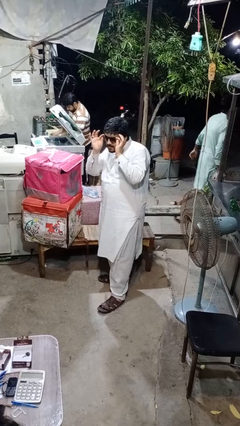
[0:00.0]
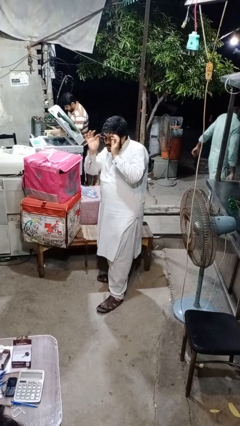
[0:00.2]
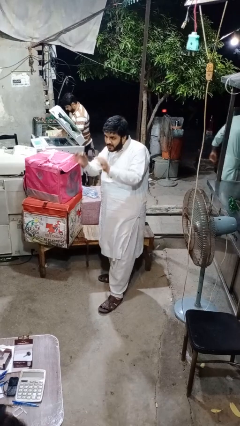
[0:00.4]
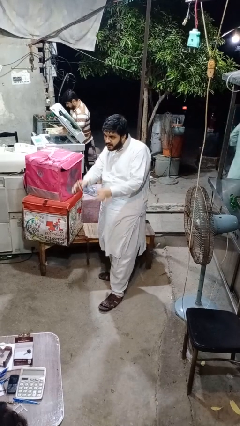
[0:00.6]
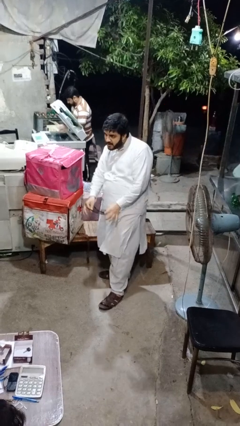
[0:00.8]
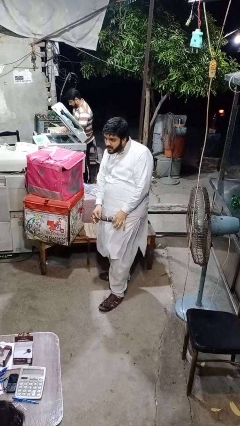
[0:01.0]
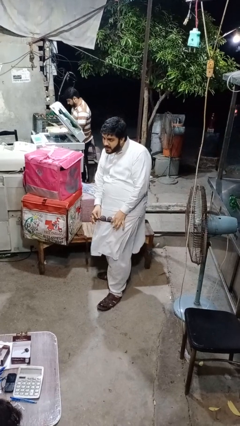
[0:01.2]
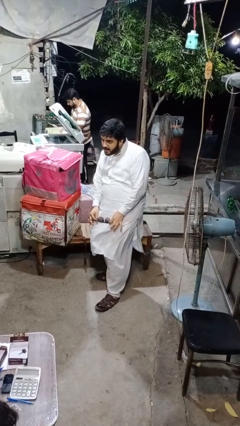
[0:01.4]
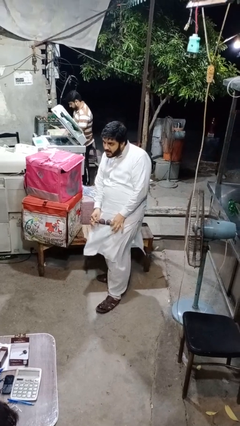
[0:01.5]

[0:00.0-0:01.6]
person takes off glasses

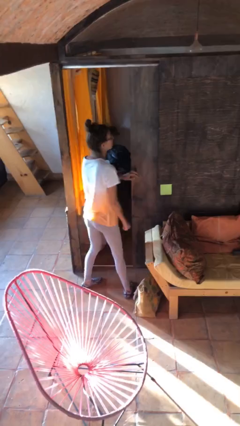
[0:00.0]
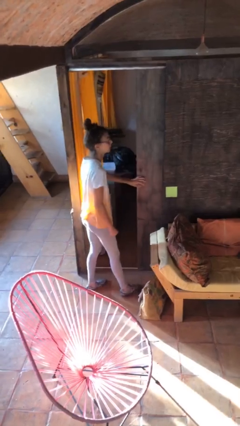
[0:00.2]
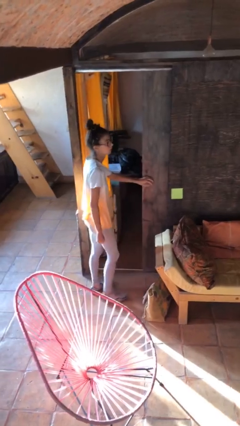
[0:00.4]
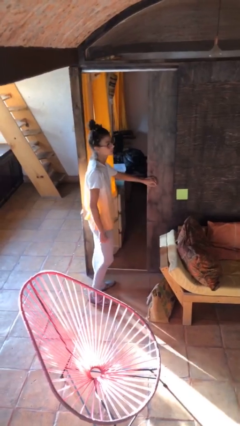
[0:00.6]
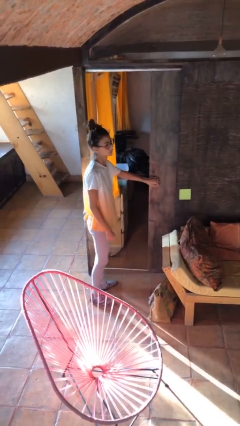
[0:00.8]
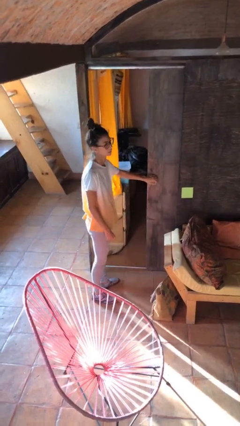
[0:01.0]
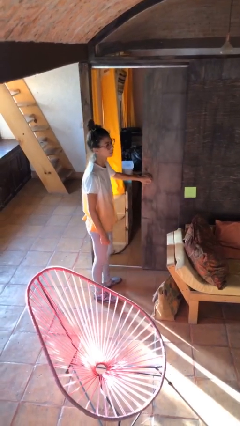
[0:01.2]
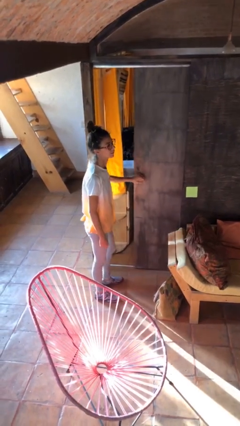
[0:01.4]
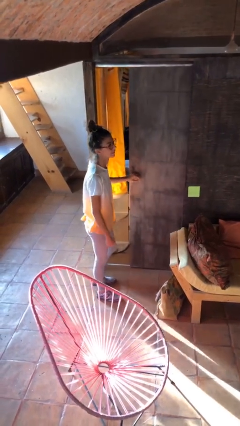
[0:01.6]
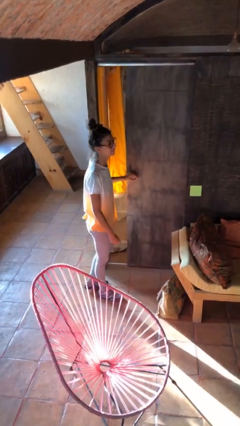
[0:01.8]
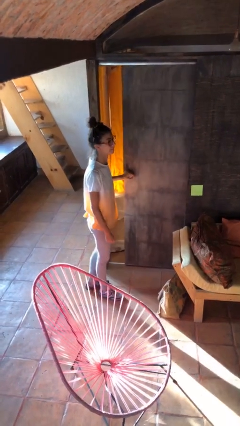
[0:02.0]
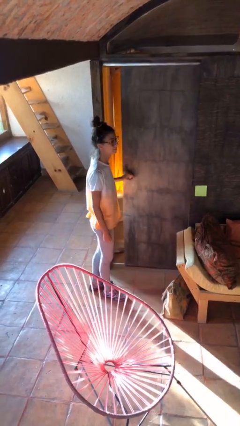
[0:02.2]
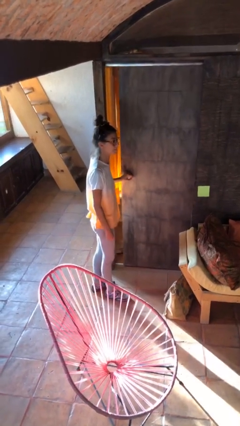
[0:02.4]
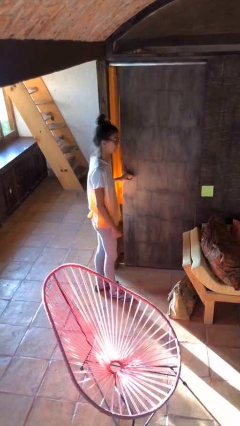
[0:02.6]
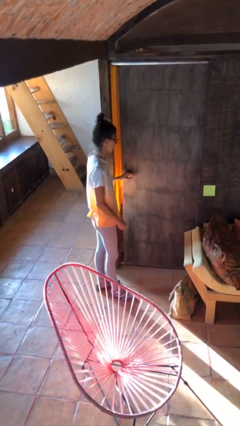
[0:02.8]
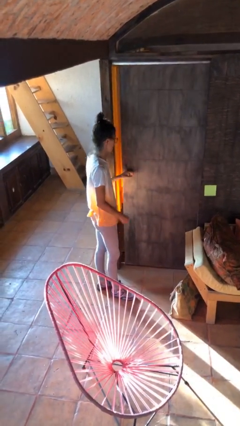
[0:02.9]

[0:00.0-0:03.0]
person closes sliding door

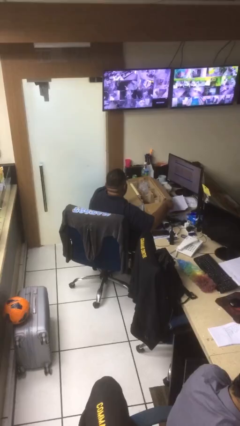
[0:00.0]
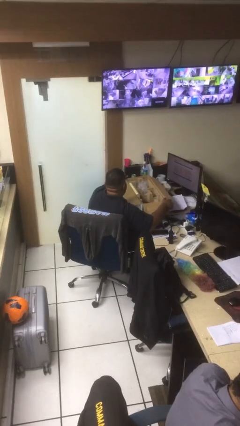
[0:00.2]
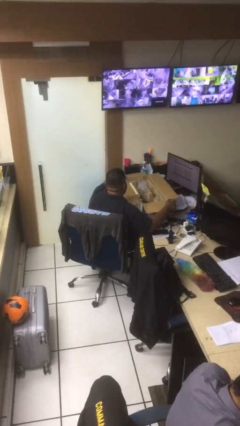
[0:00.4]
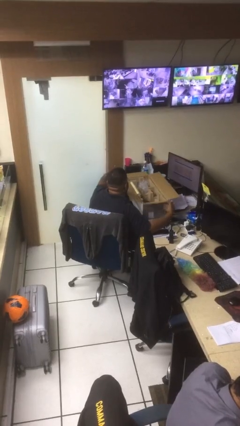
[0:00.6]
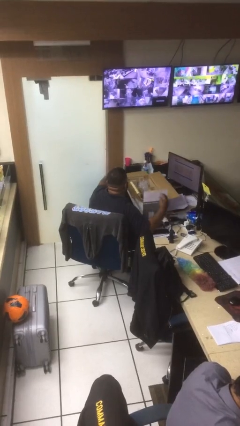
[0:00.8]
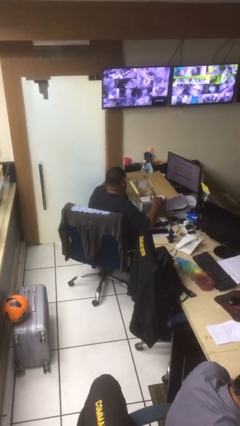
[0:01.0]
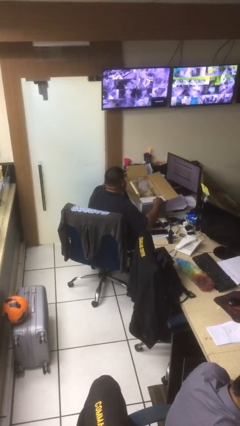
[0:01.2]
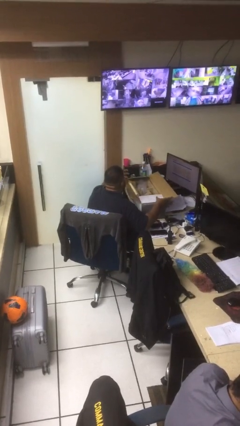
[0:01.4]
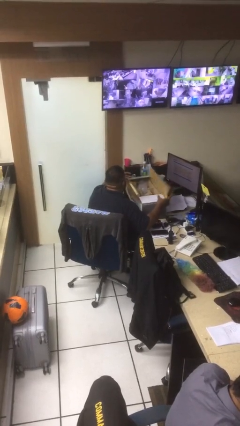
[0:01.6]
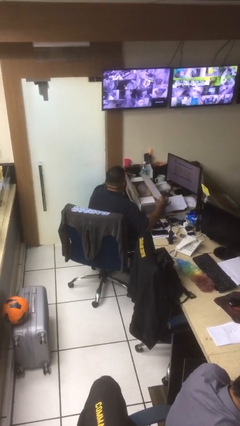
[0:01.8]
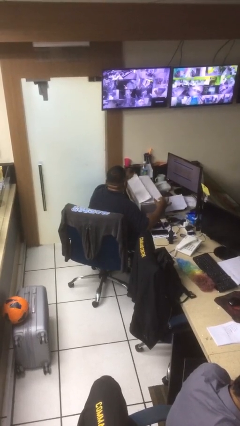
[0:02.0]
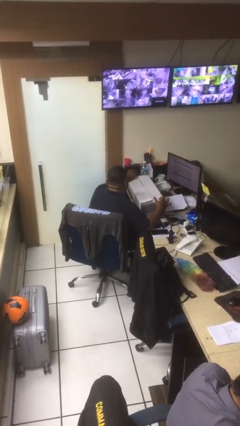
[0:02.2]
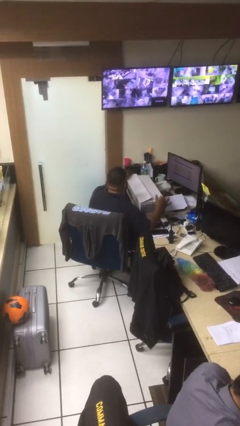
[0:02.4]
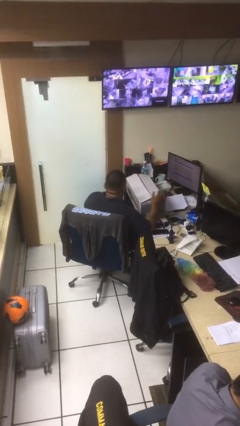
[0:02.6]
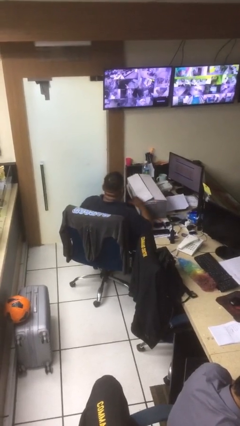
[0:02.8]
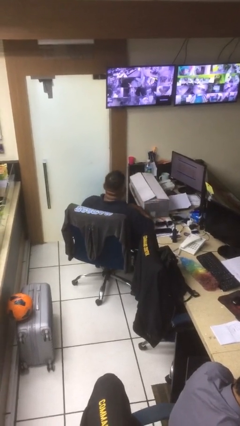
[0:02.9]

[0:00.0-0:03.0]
person closes box

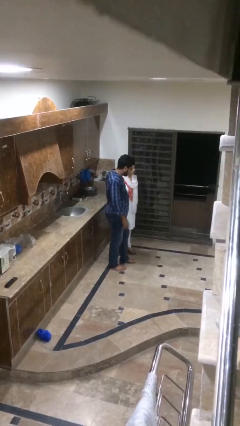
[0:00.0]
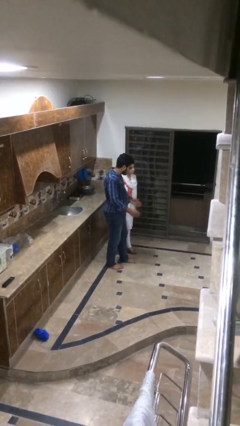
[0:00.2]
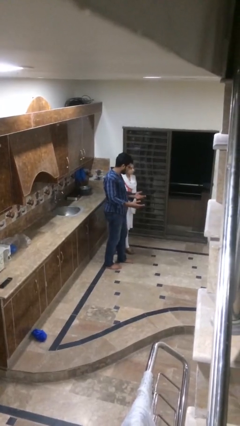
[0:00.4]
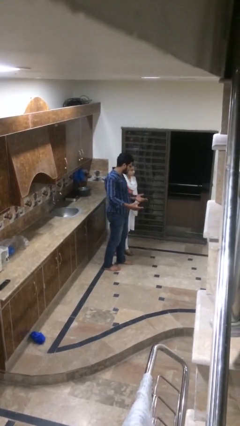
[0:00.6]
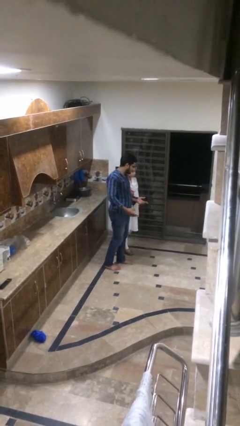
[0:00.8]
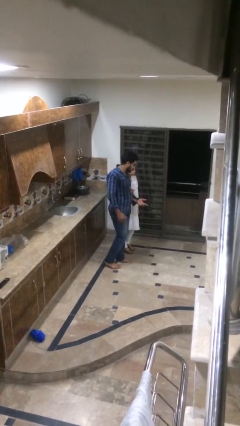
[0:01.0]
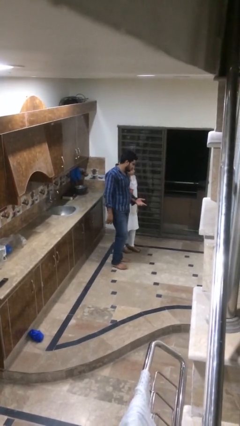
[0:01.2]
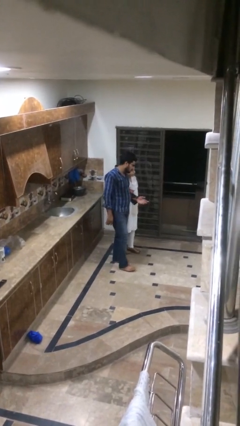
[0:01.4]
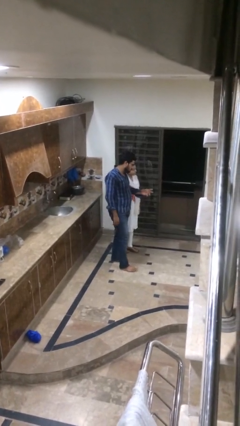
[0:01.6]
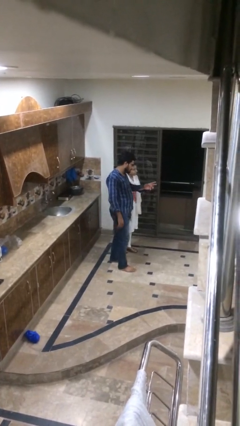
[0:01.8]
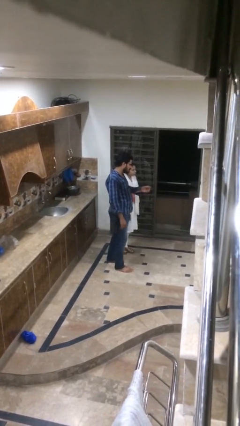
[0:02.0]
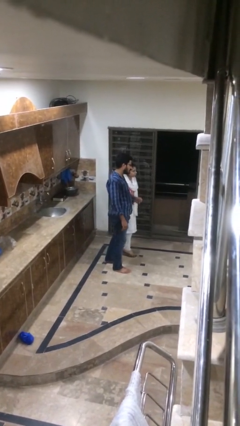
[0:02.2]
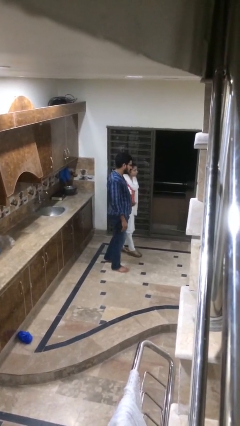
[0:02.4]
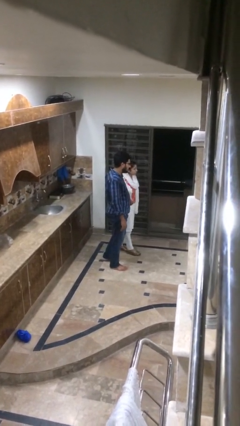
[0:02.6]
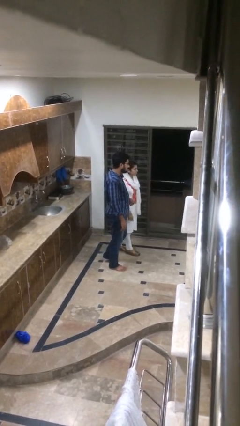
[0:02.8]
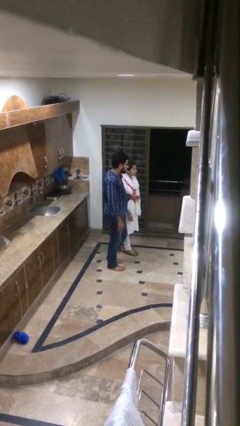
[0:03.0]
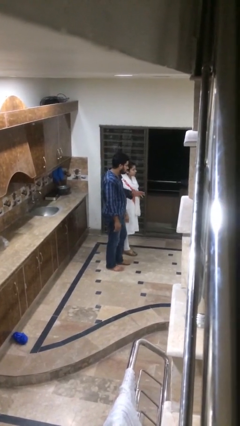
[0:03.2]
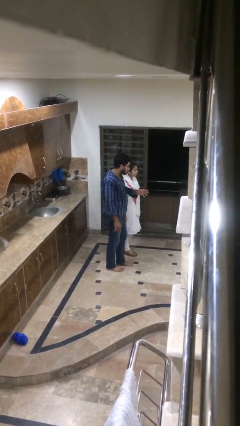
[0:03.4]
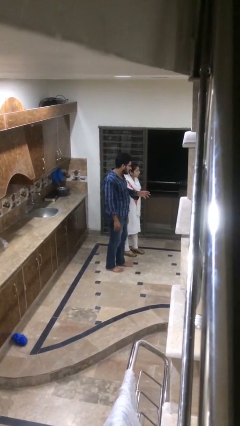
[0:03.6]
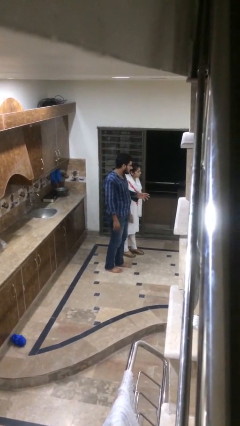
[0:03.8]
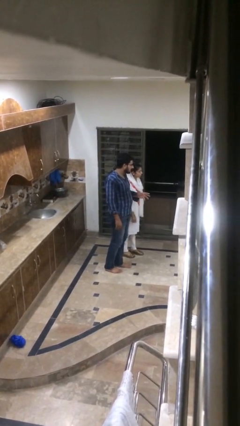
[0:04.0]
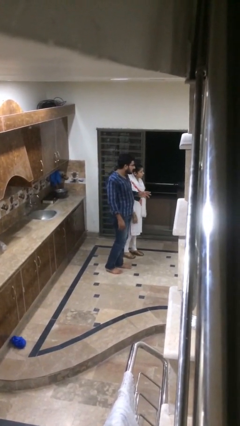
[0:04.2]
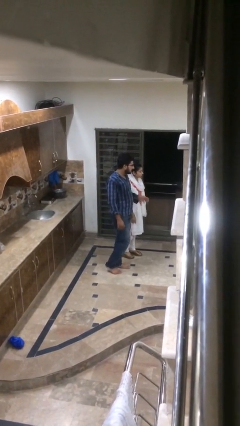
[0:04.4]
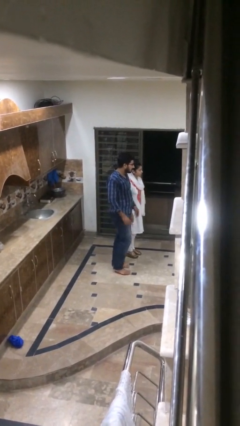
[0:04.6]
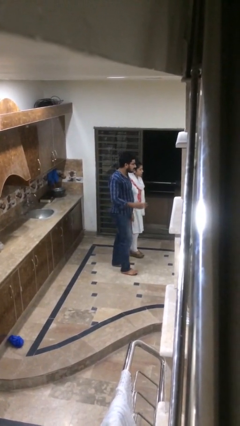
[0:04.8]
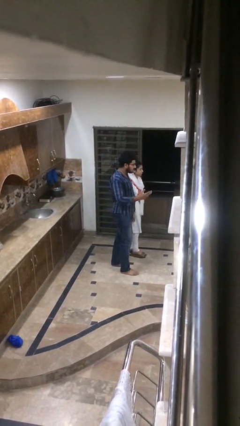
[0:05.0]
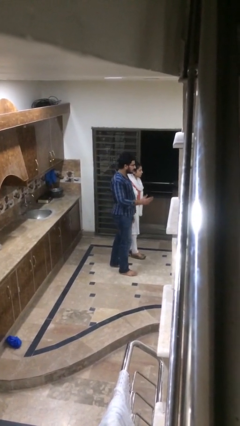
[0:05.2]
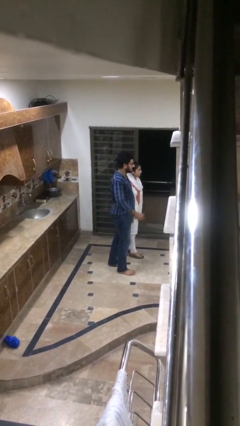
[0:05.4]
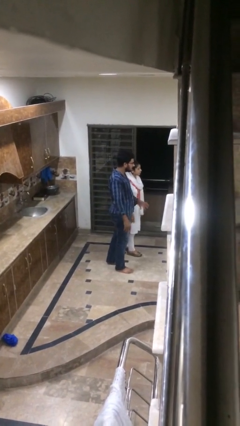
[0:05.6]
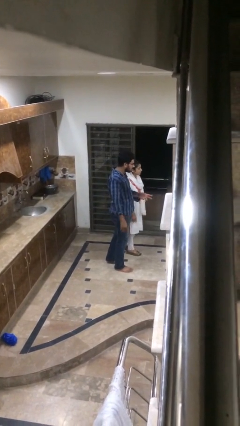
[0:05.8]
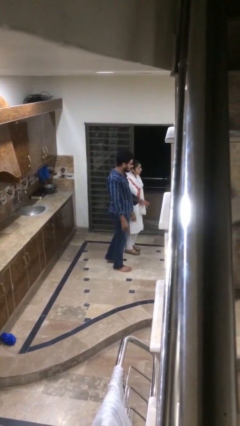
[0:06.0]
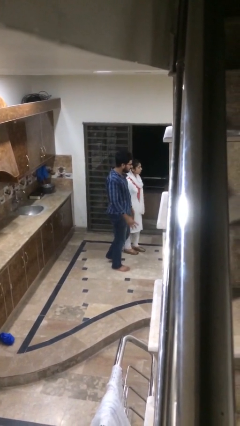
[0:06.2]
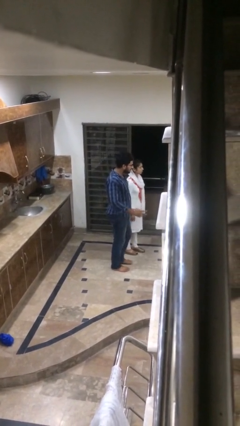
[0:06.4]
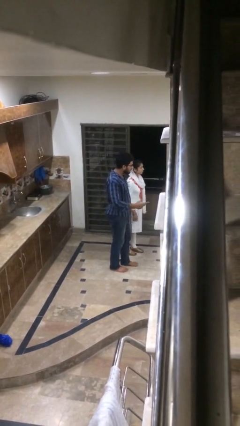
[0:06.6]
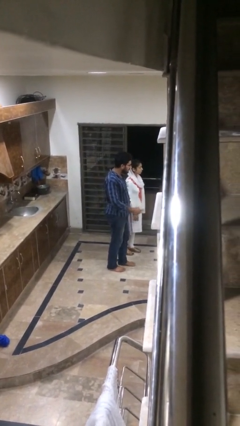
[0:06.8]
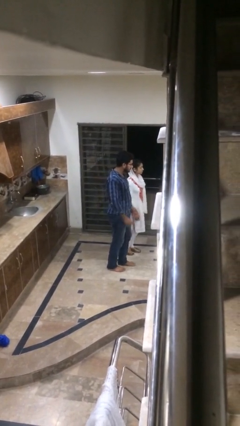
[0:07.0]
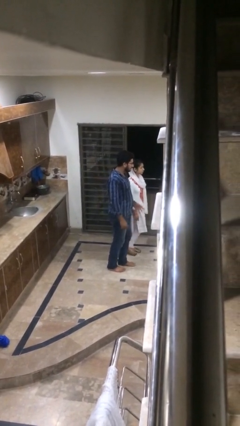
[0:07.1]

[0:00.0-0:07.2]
person talks to person

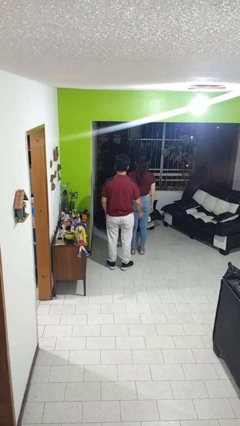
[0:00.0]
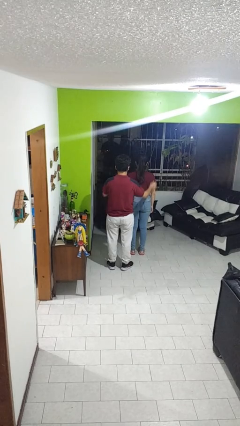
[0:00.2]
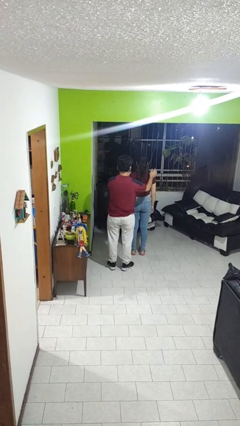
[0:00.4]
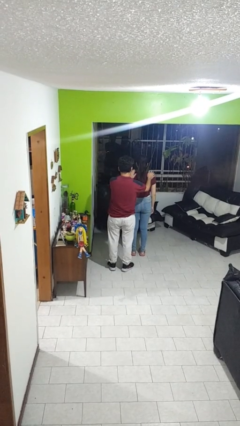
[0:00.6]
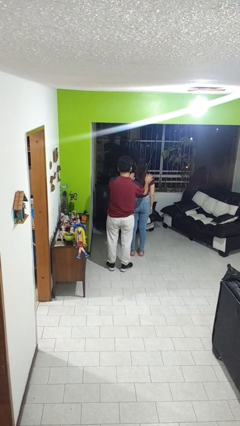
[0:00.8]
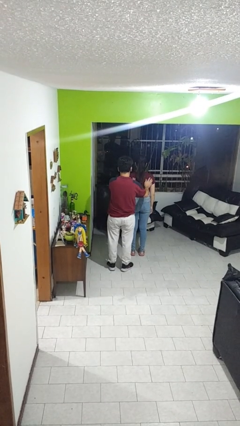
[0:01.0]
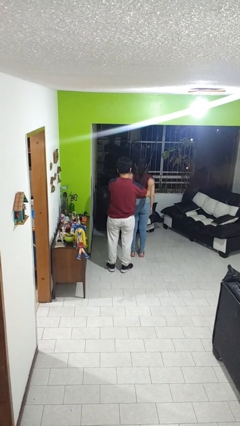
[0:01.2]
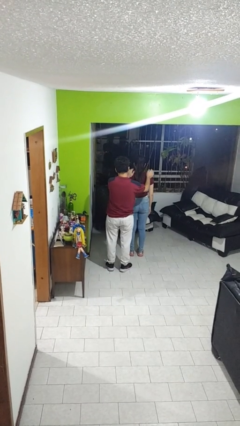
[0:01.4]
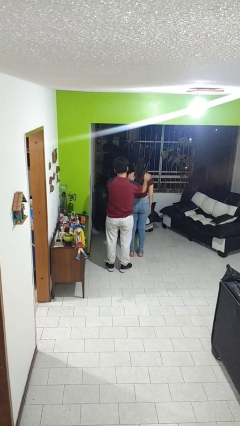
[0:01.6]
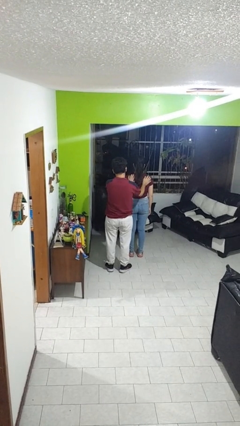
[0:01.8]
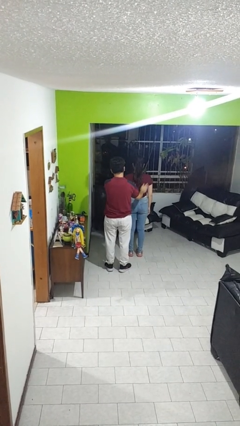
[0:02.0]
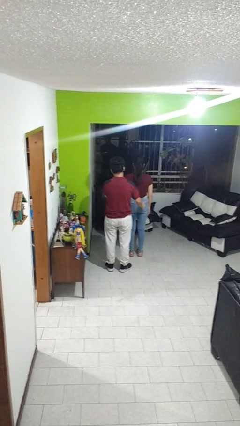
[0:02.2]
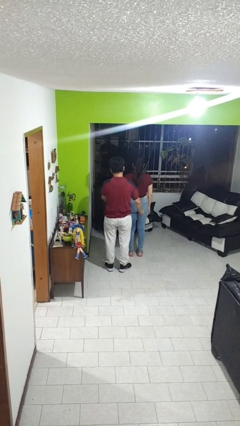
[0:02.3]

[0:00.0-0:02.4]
person touches back of person
